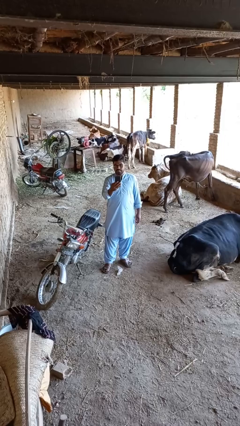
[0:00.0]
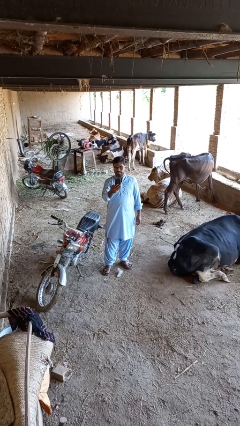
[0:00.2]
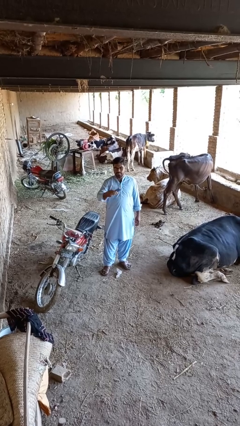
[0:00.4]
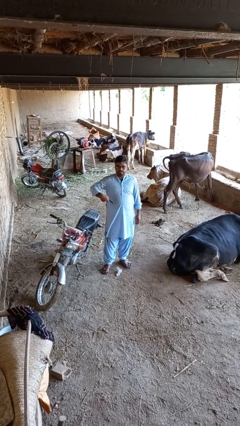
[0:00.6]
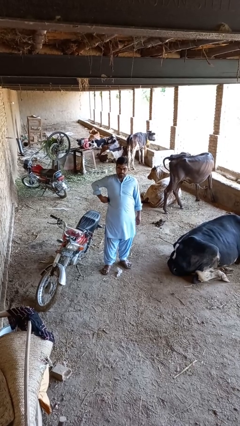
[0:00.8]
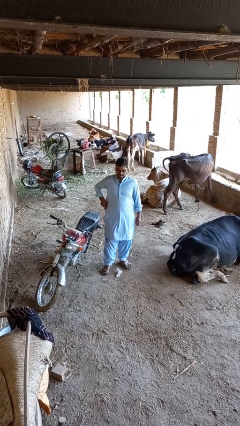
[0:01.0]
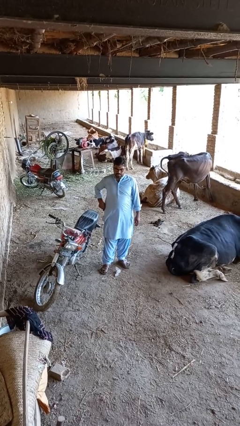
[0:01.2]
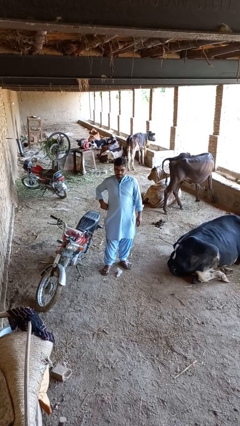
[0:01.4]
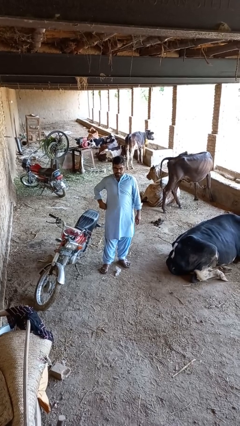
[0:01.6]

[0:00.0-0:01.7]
person puts phone into pocket

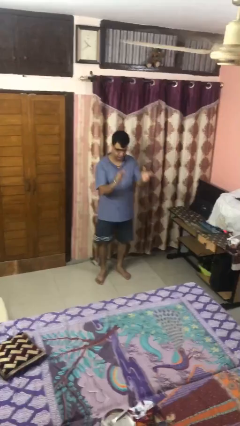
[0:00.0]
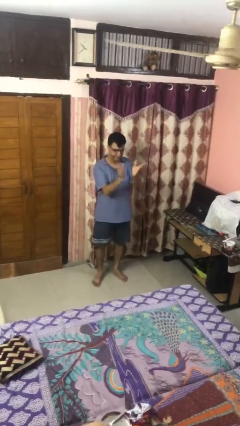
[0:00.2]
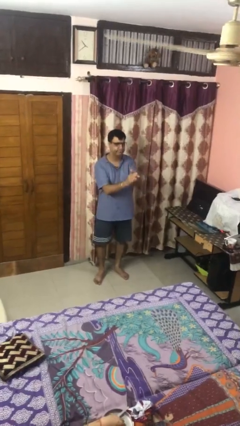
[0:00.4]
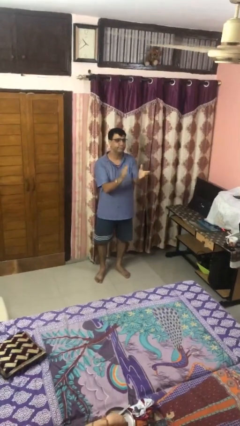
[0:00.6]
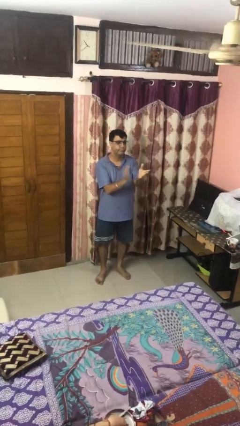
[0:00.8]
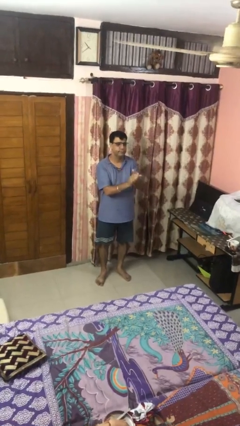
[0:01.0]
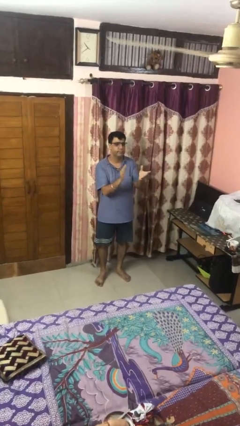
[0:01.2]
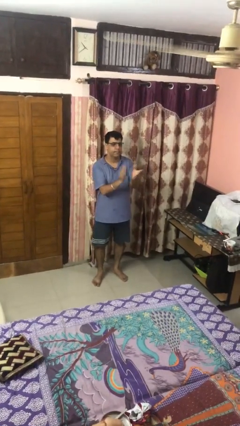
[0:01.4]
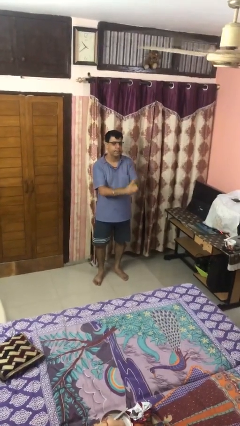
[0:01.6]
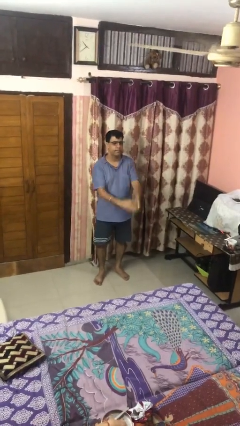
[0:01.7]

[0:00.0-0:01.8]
person claps hands

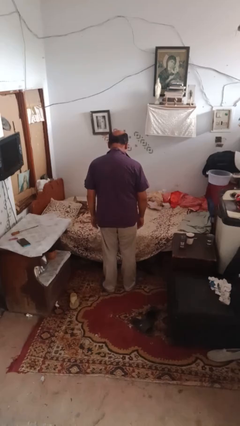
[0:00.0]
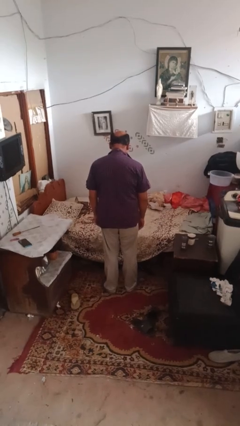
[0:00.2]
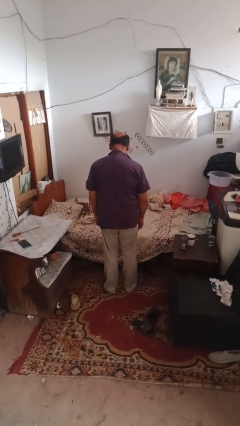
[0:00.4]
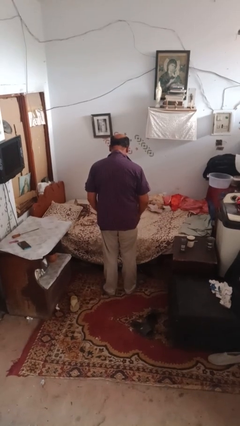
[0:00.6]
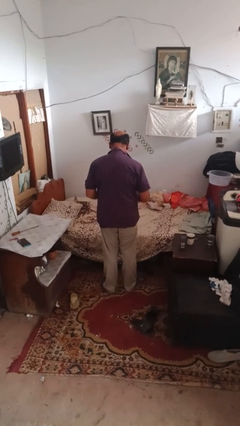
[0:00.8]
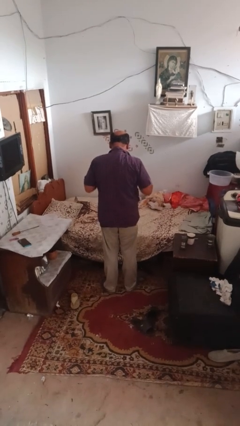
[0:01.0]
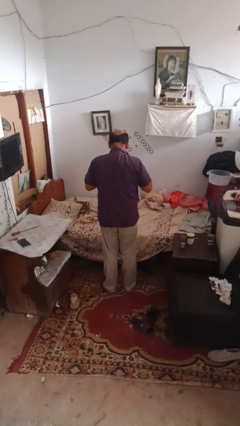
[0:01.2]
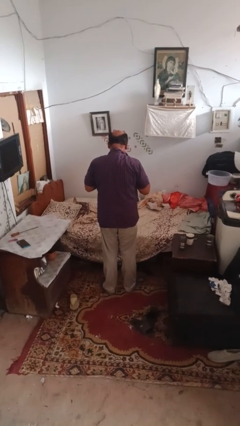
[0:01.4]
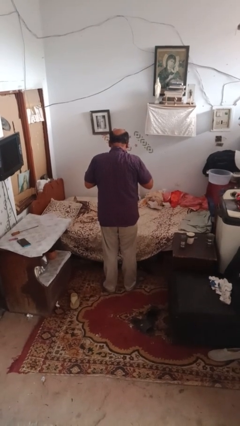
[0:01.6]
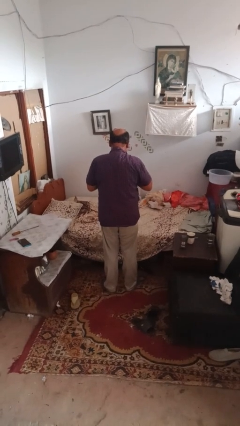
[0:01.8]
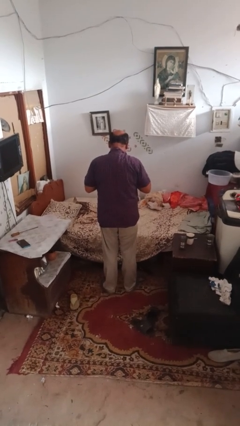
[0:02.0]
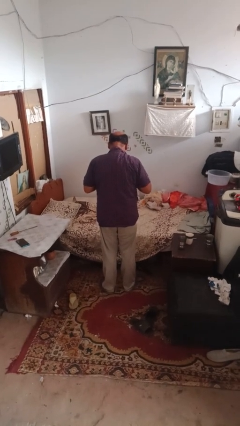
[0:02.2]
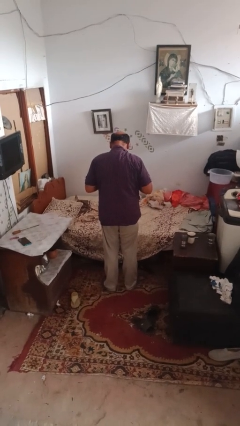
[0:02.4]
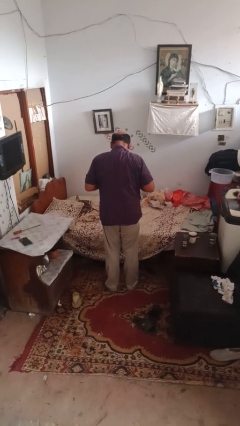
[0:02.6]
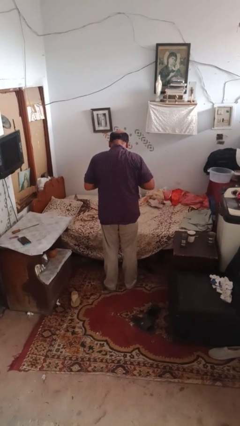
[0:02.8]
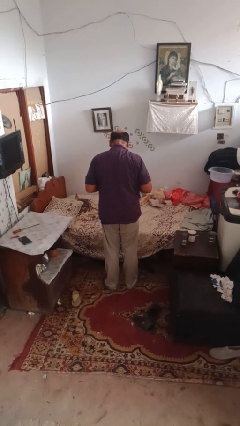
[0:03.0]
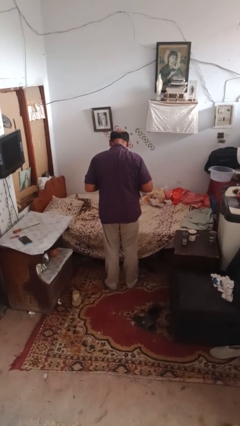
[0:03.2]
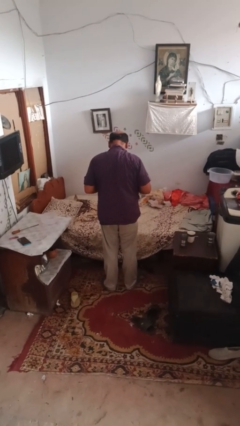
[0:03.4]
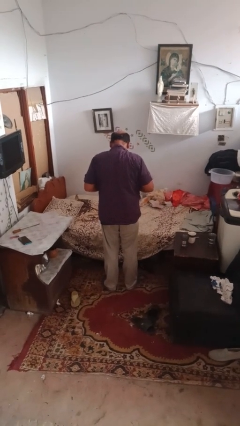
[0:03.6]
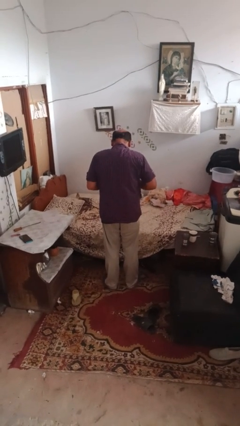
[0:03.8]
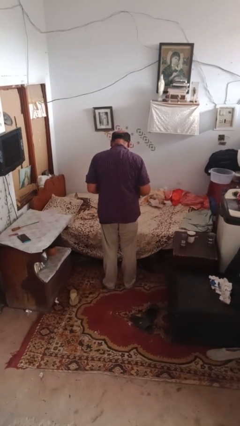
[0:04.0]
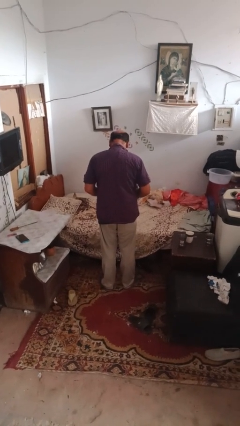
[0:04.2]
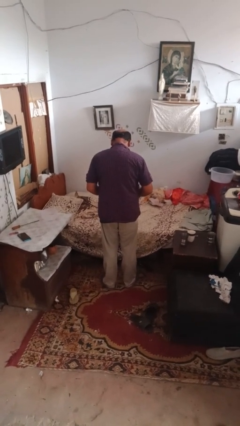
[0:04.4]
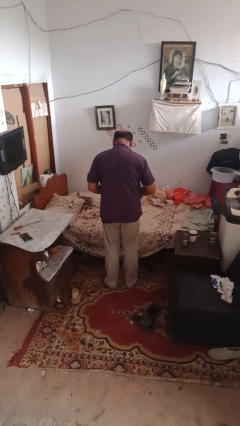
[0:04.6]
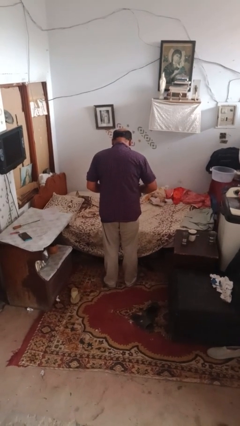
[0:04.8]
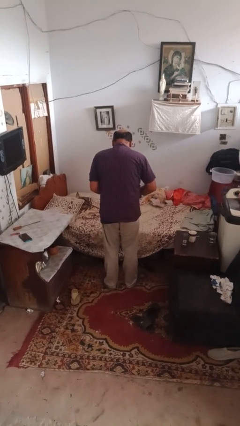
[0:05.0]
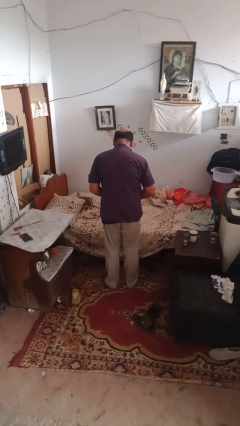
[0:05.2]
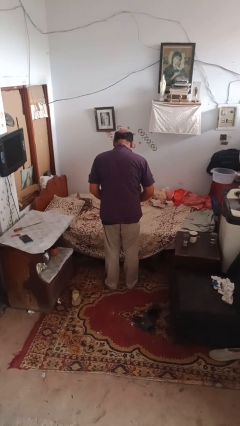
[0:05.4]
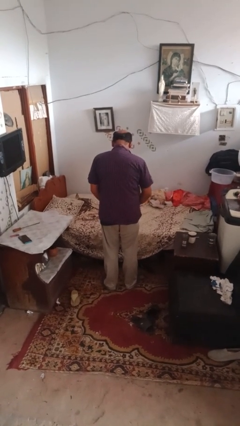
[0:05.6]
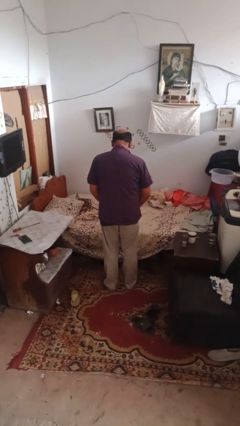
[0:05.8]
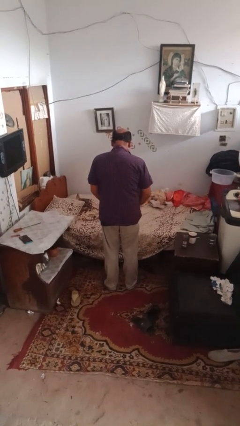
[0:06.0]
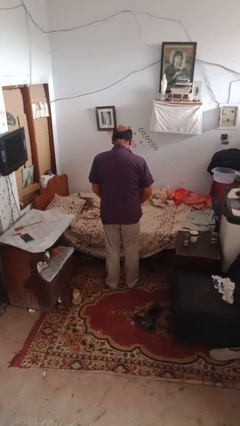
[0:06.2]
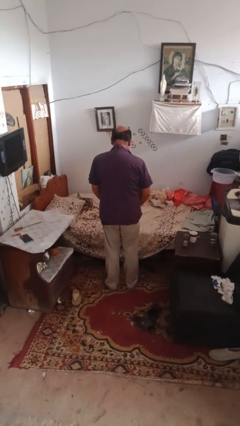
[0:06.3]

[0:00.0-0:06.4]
person buttons shirt

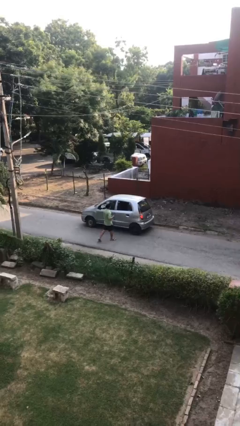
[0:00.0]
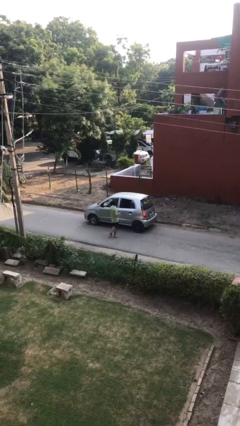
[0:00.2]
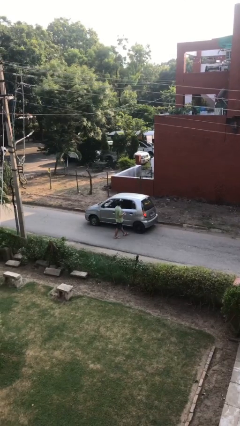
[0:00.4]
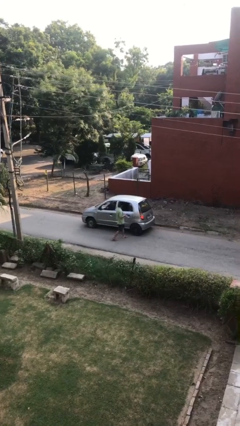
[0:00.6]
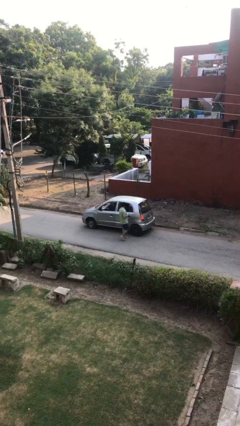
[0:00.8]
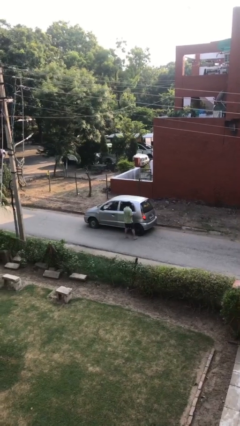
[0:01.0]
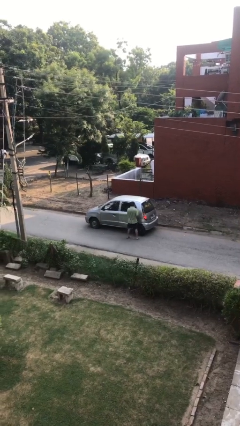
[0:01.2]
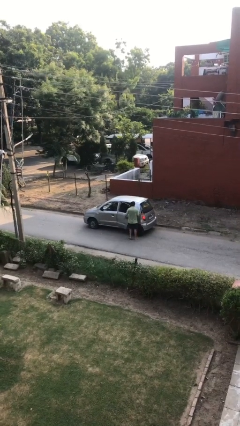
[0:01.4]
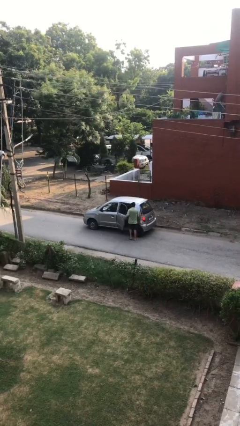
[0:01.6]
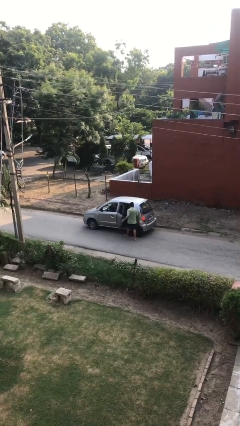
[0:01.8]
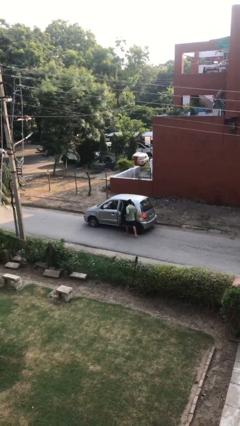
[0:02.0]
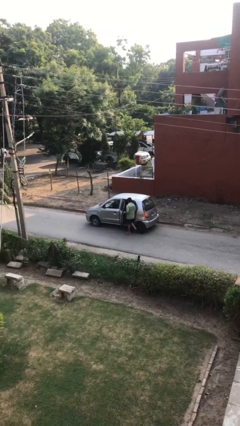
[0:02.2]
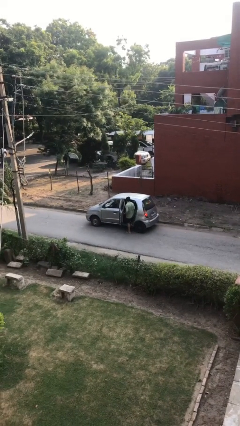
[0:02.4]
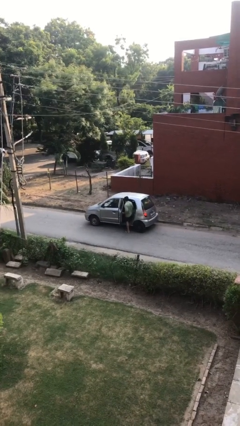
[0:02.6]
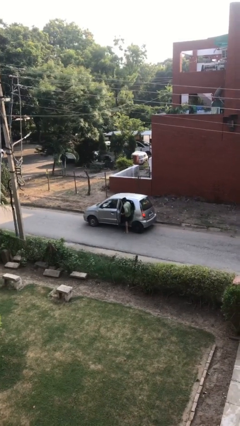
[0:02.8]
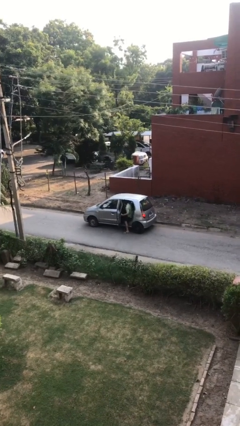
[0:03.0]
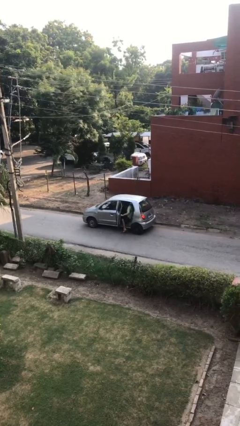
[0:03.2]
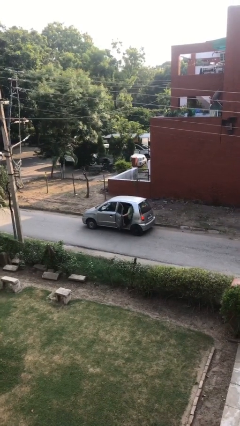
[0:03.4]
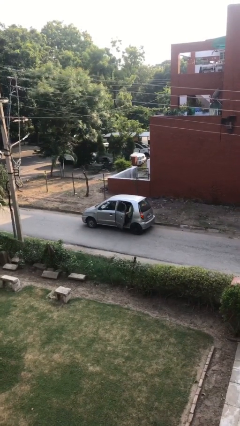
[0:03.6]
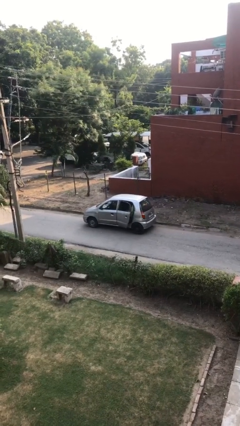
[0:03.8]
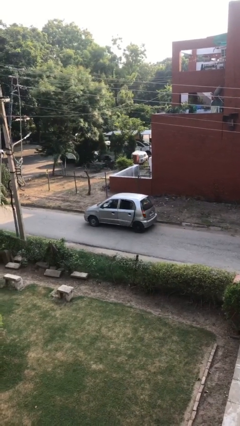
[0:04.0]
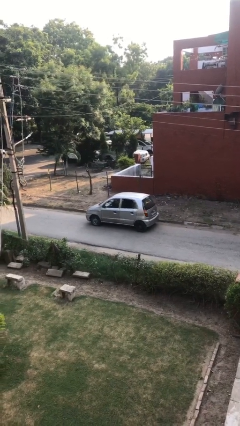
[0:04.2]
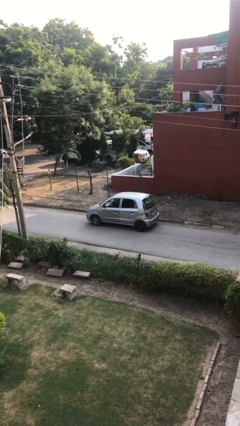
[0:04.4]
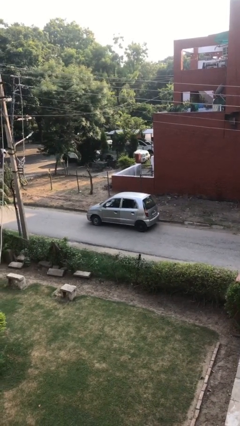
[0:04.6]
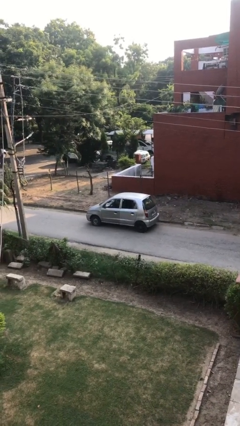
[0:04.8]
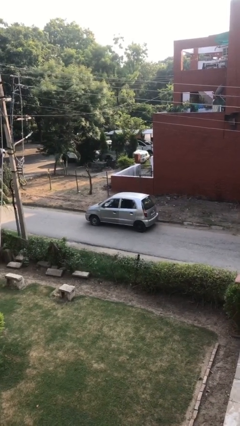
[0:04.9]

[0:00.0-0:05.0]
car picks up person

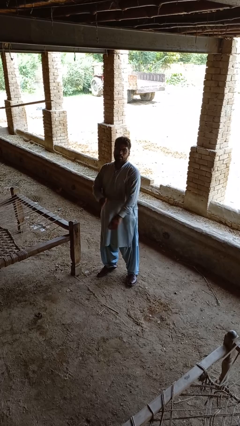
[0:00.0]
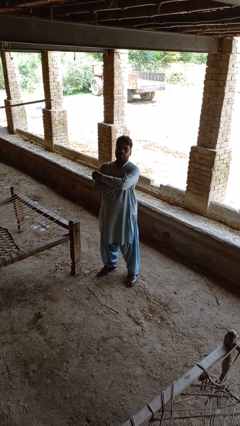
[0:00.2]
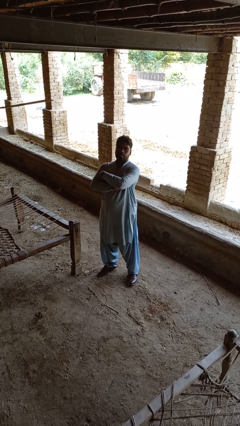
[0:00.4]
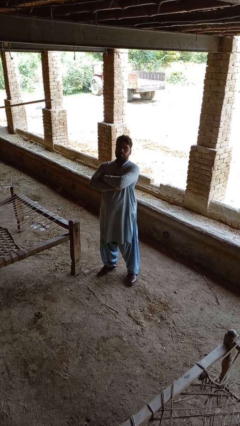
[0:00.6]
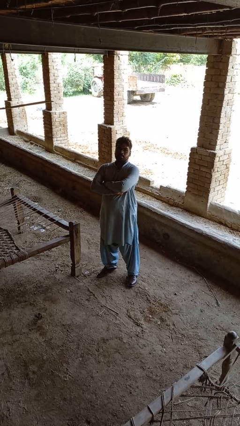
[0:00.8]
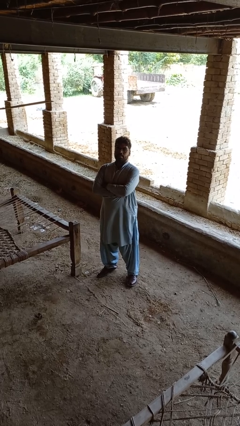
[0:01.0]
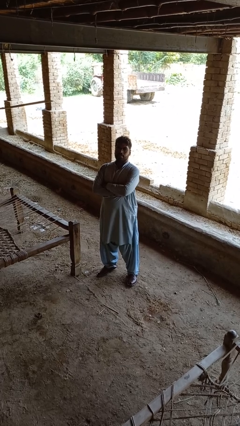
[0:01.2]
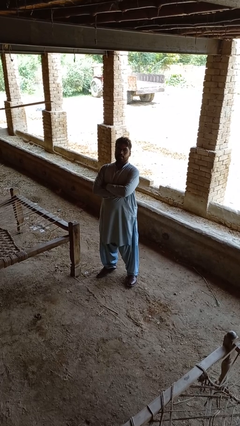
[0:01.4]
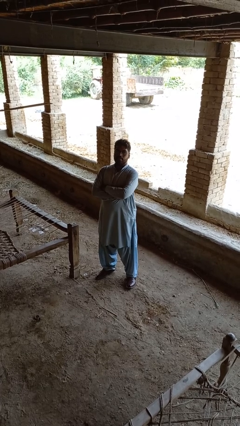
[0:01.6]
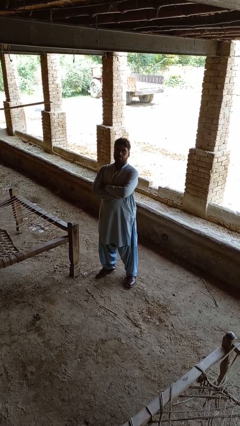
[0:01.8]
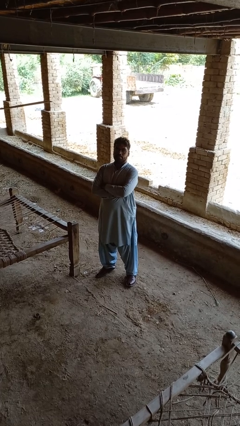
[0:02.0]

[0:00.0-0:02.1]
person crosses arms

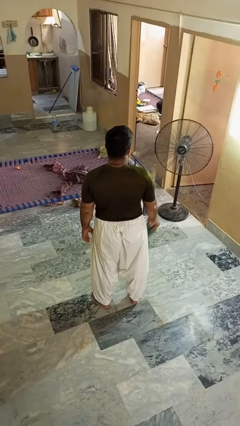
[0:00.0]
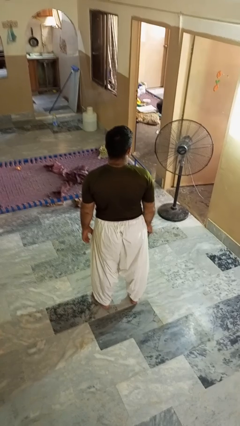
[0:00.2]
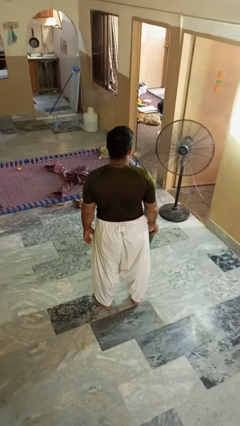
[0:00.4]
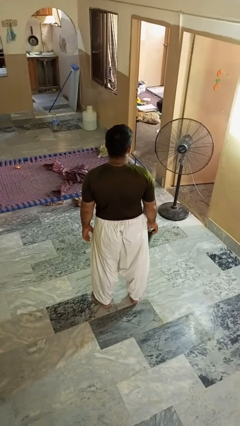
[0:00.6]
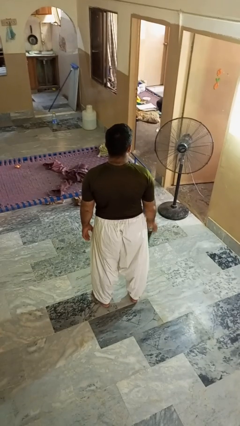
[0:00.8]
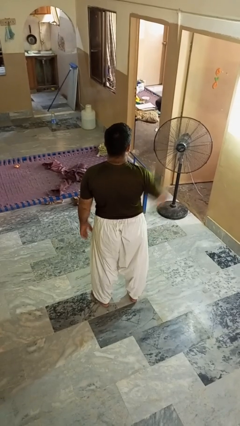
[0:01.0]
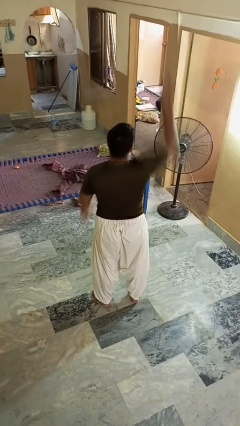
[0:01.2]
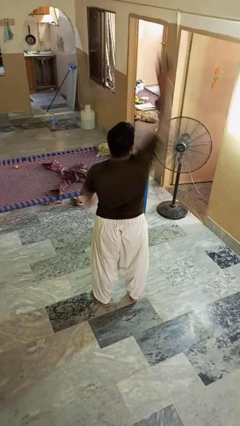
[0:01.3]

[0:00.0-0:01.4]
person drops object
